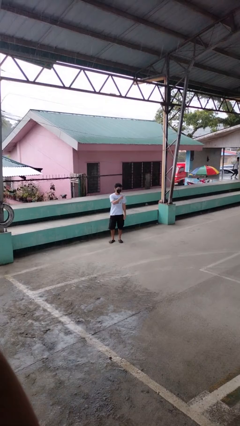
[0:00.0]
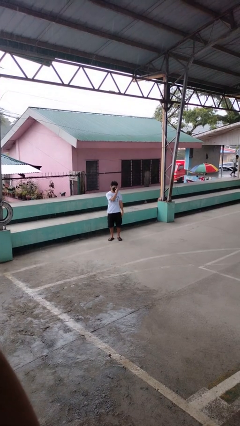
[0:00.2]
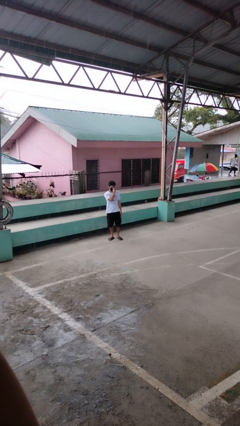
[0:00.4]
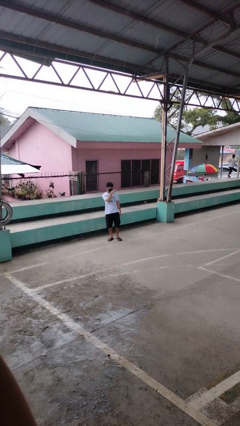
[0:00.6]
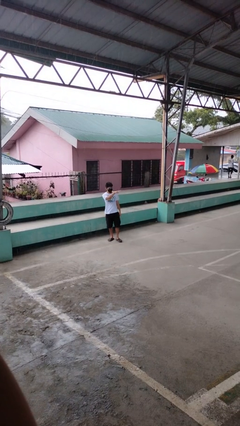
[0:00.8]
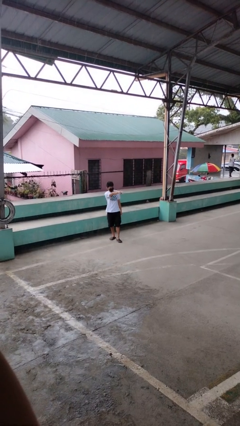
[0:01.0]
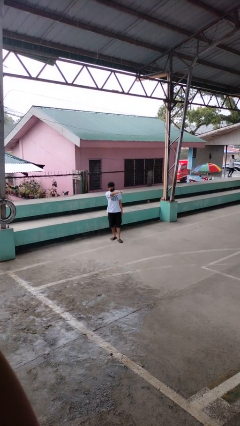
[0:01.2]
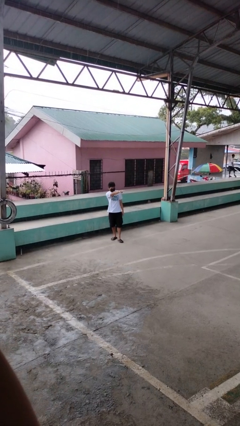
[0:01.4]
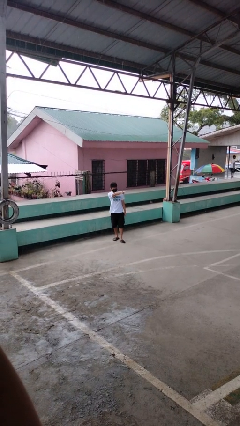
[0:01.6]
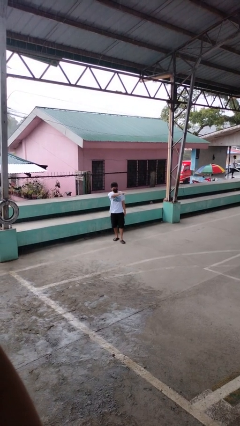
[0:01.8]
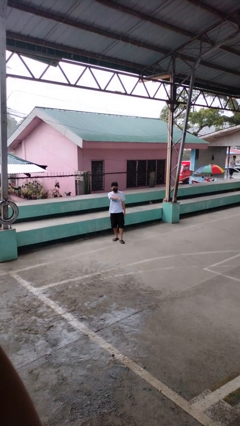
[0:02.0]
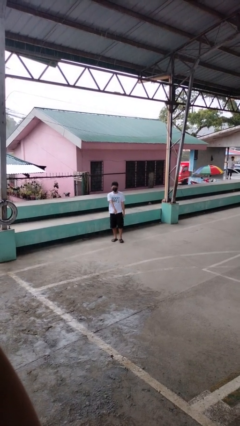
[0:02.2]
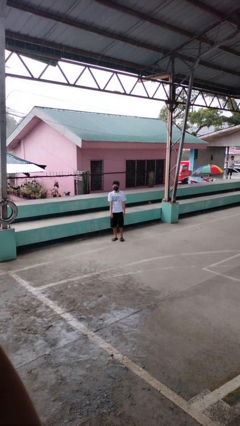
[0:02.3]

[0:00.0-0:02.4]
person gestures watch closely

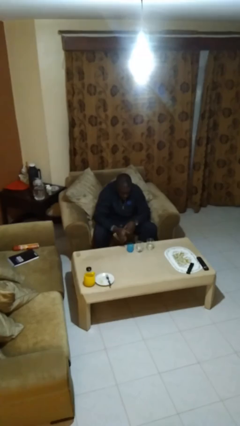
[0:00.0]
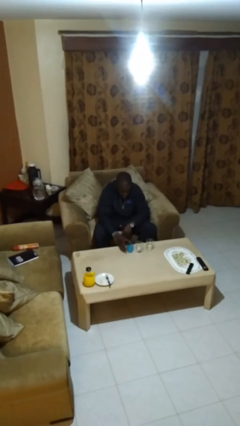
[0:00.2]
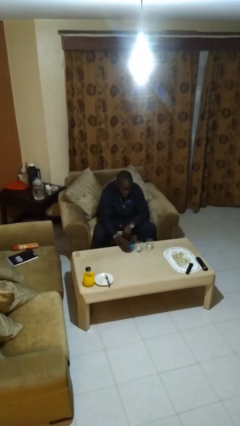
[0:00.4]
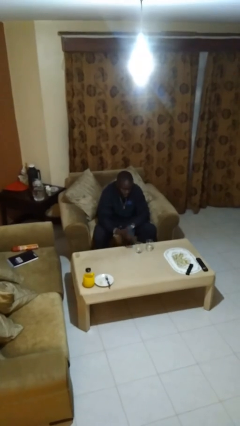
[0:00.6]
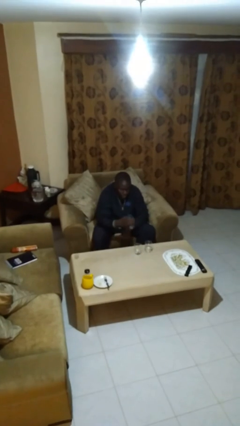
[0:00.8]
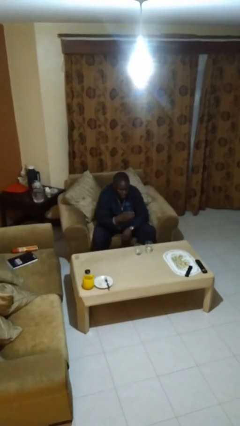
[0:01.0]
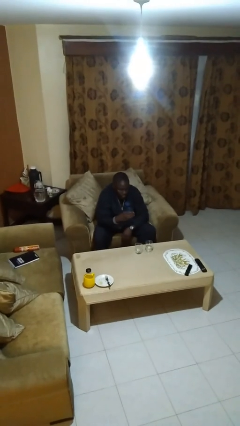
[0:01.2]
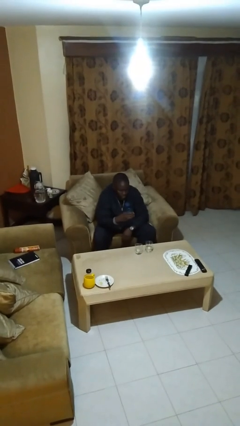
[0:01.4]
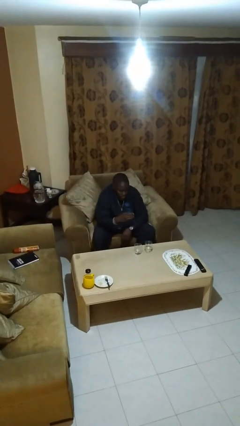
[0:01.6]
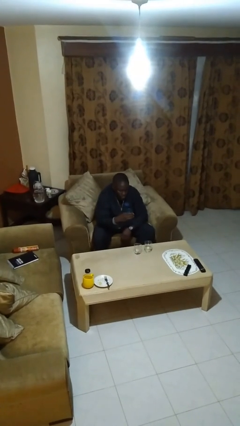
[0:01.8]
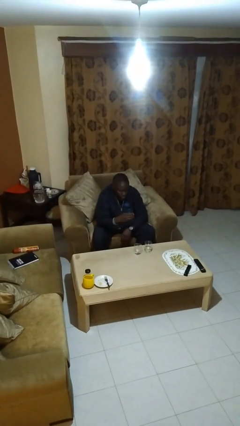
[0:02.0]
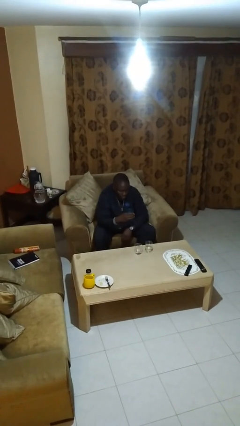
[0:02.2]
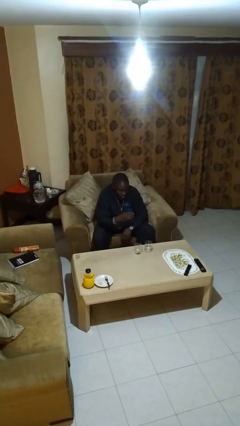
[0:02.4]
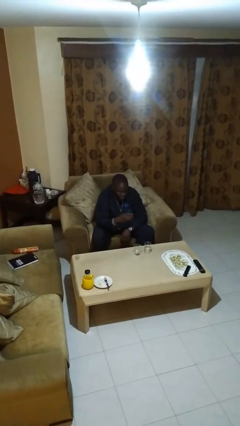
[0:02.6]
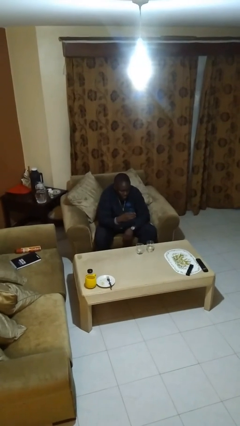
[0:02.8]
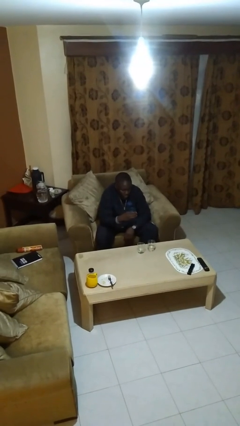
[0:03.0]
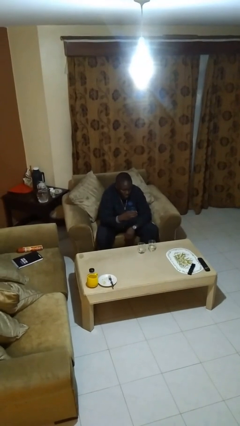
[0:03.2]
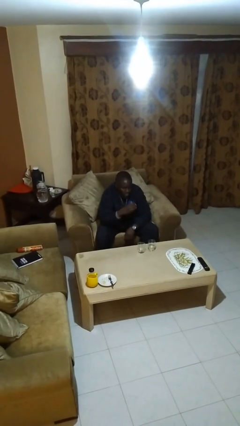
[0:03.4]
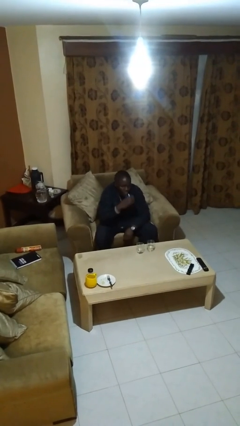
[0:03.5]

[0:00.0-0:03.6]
person picks up object from table

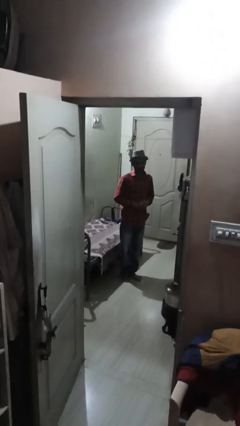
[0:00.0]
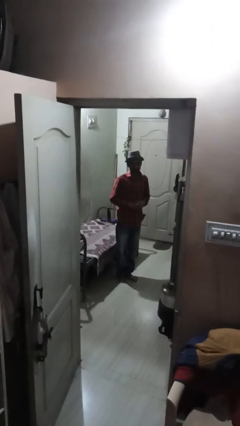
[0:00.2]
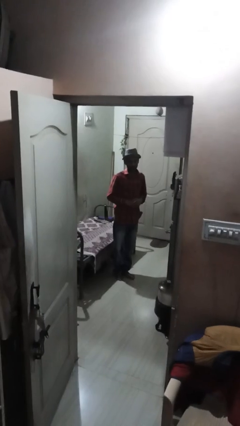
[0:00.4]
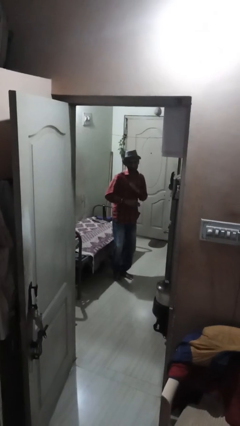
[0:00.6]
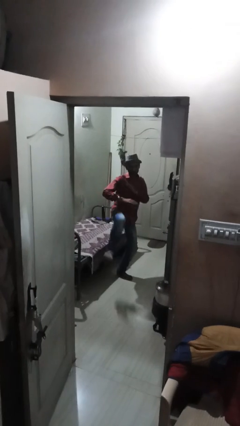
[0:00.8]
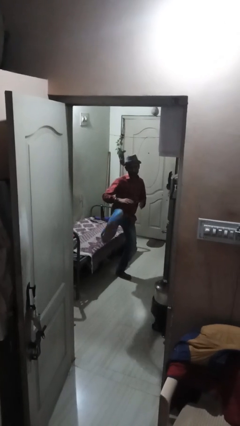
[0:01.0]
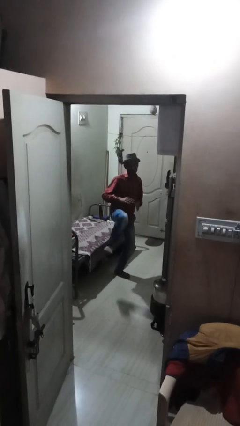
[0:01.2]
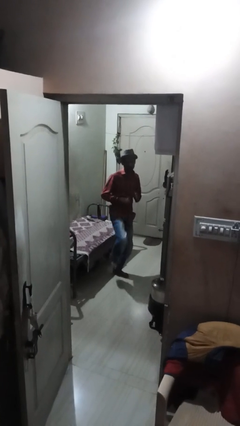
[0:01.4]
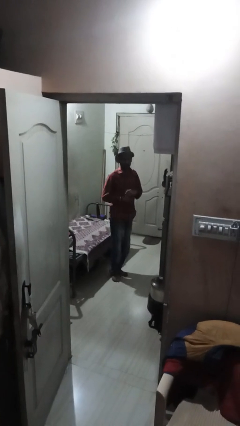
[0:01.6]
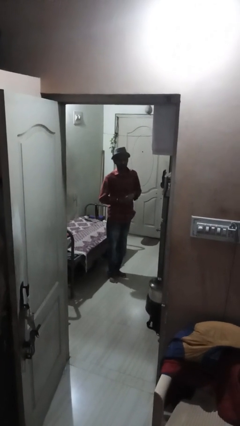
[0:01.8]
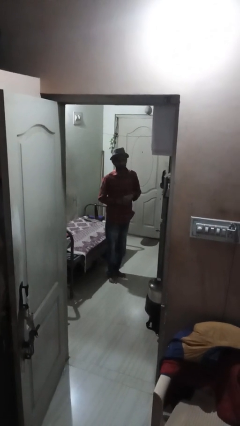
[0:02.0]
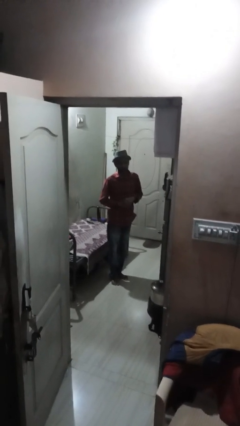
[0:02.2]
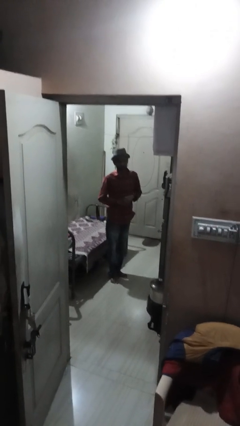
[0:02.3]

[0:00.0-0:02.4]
person karate kicks

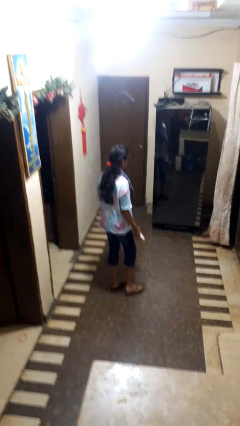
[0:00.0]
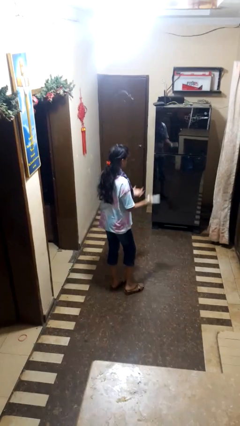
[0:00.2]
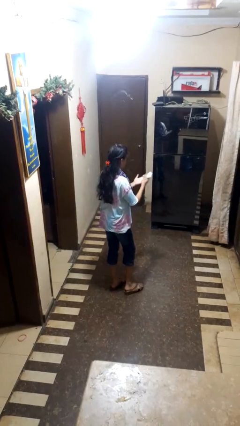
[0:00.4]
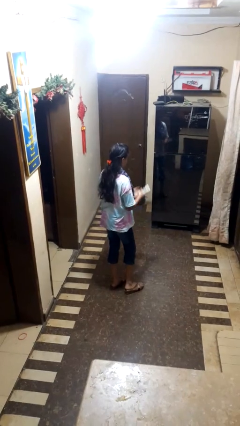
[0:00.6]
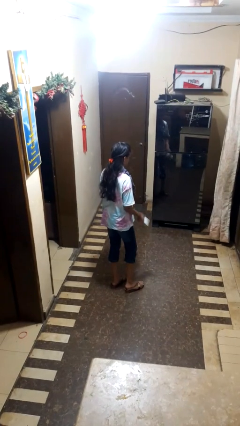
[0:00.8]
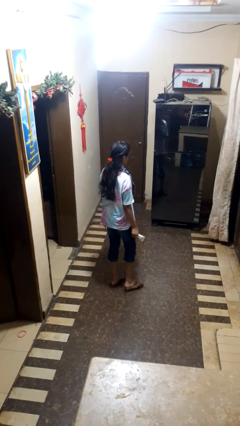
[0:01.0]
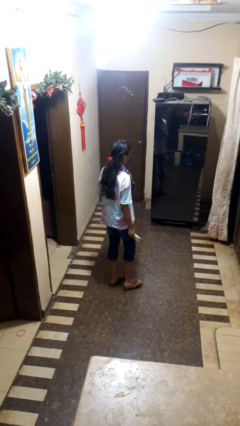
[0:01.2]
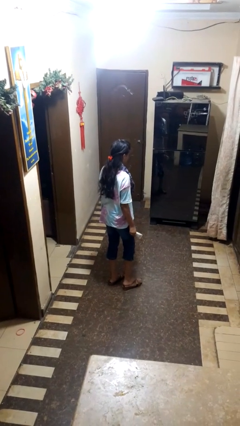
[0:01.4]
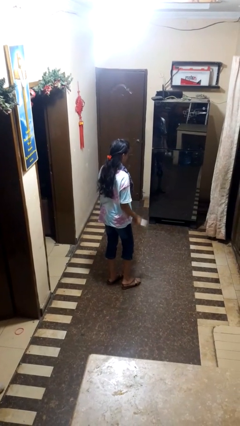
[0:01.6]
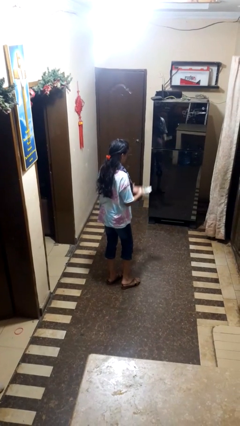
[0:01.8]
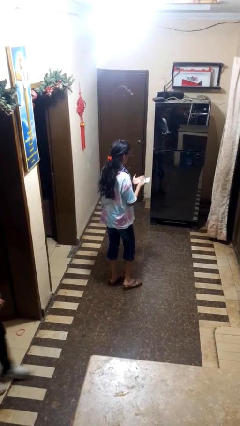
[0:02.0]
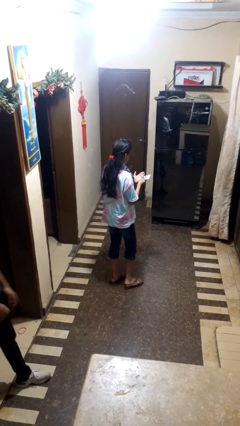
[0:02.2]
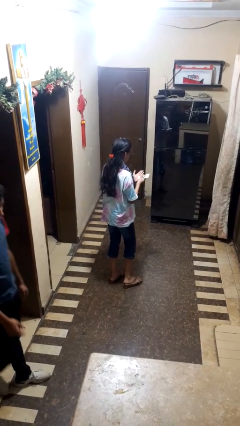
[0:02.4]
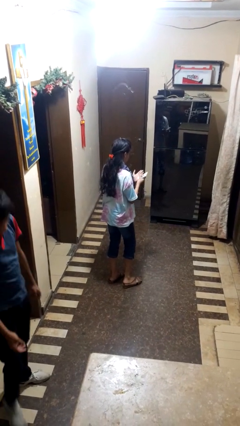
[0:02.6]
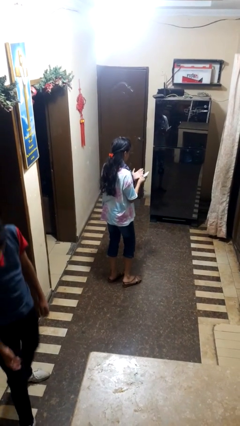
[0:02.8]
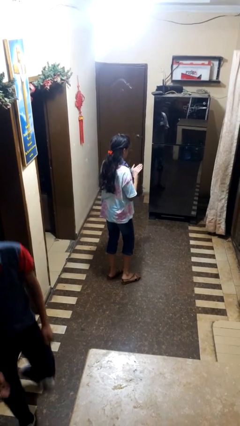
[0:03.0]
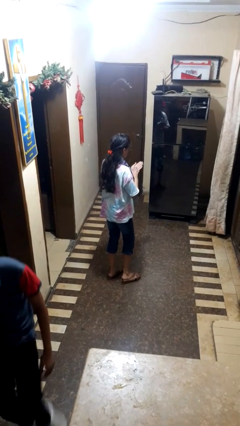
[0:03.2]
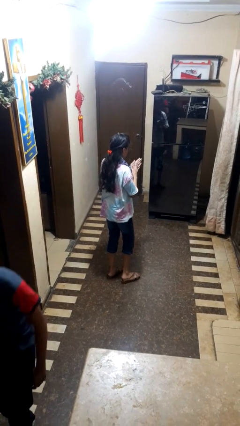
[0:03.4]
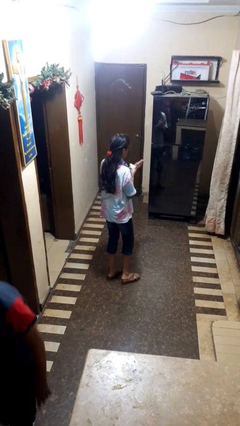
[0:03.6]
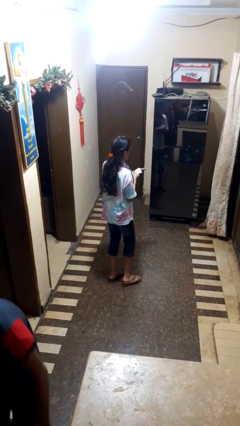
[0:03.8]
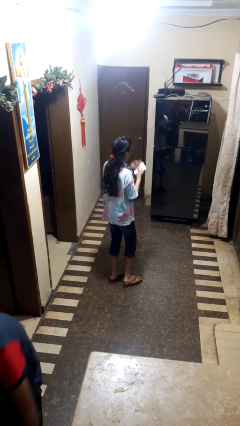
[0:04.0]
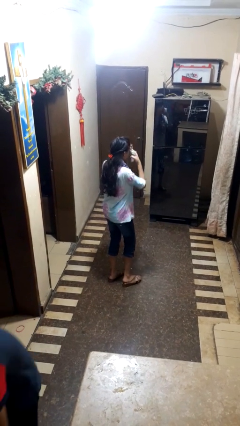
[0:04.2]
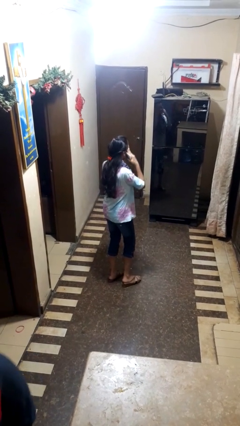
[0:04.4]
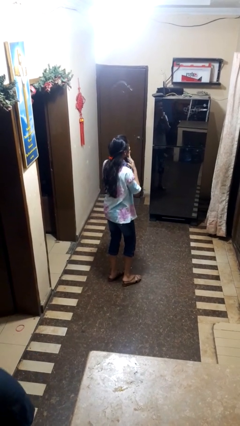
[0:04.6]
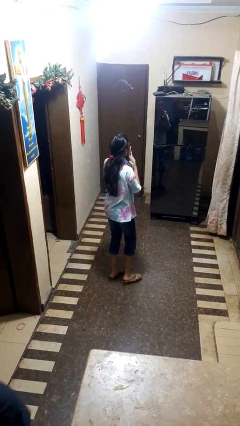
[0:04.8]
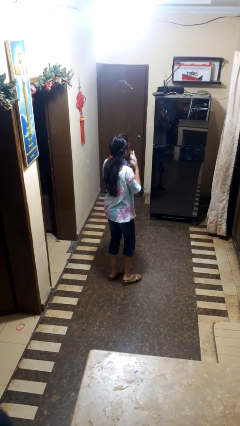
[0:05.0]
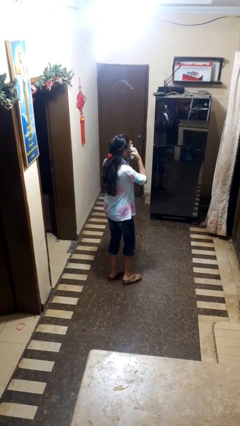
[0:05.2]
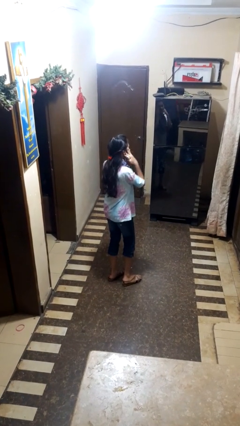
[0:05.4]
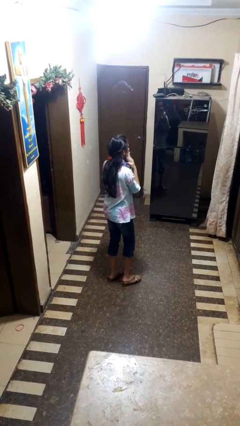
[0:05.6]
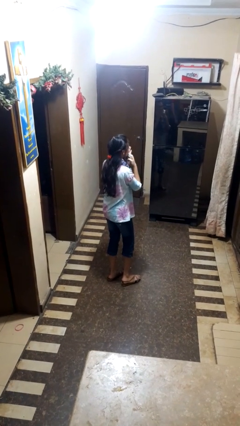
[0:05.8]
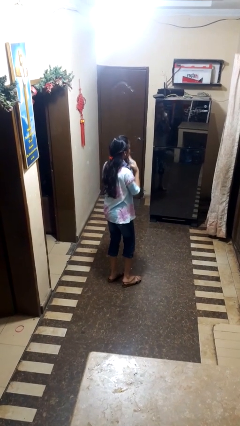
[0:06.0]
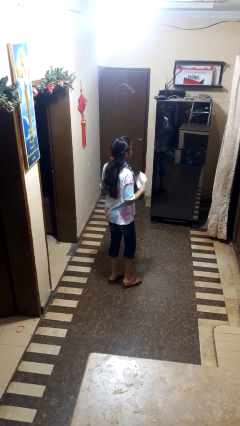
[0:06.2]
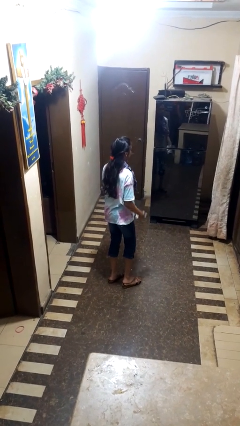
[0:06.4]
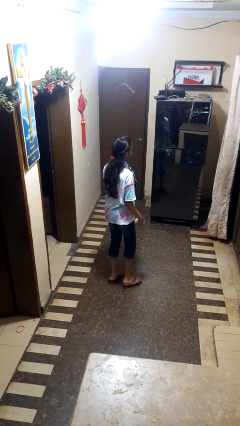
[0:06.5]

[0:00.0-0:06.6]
person applies facial moisturizer

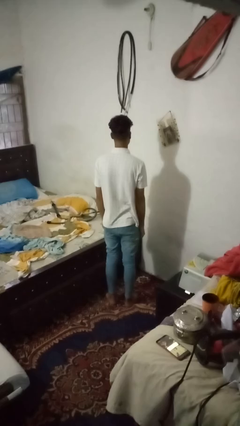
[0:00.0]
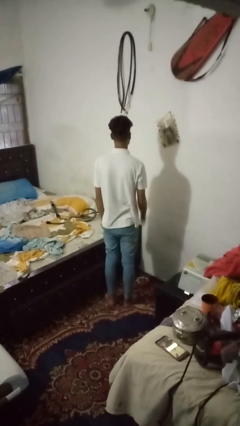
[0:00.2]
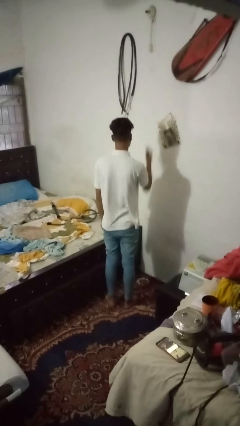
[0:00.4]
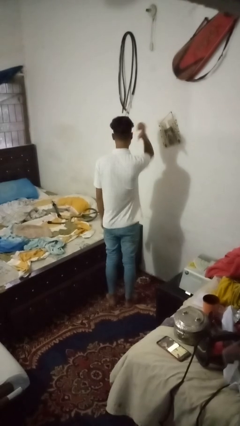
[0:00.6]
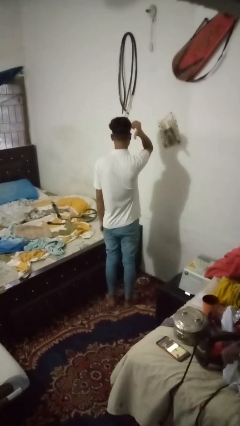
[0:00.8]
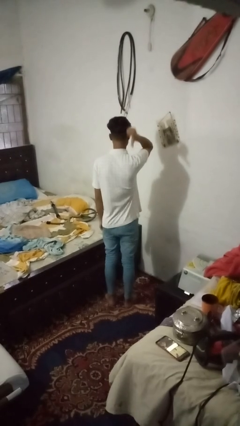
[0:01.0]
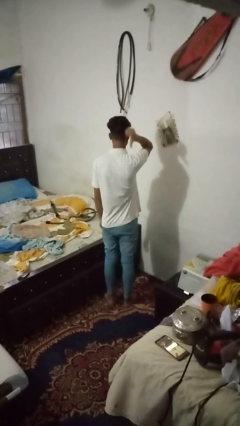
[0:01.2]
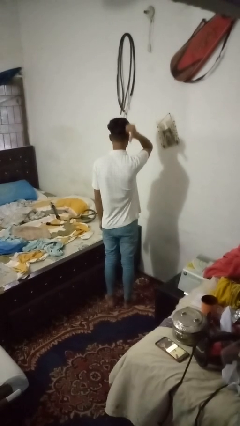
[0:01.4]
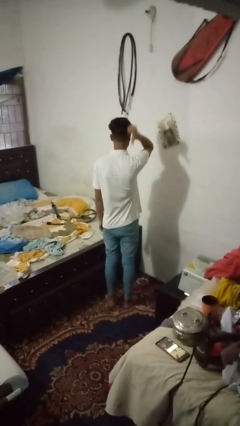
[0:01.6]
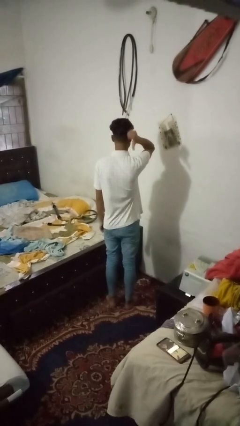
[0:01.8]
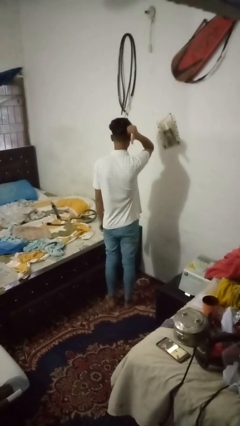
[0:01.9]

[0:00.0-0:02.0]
person gestures behind me

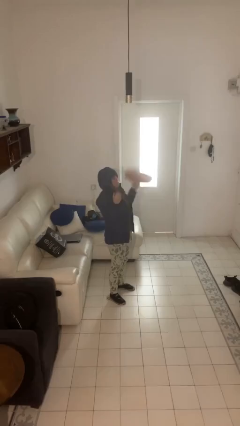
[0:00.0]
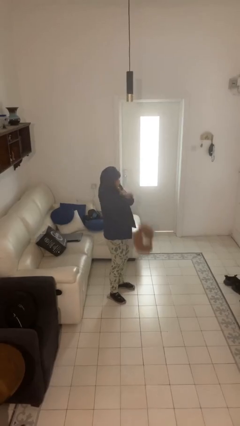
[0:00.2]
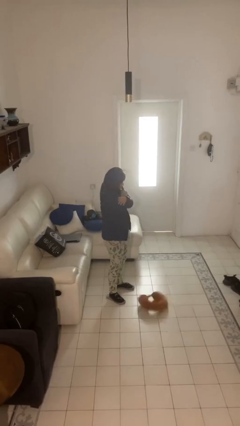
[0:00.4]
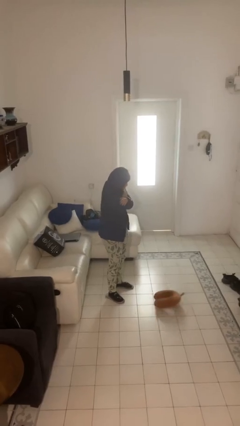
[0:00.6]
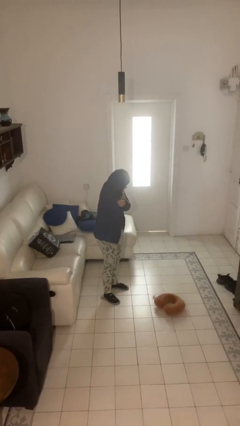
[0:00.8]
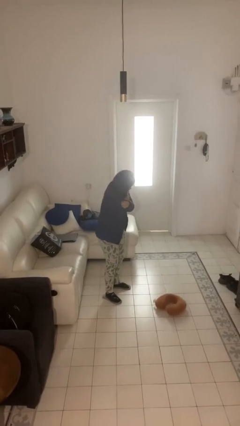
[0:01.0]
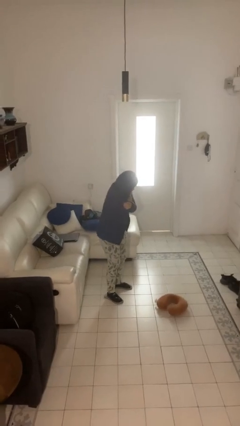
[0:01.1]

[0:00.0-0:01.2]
person catches dropped object
